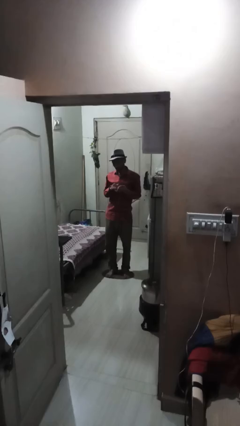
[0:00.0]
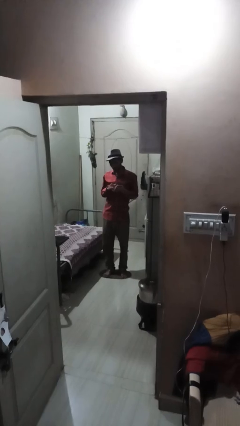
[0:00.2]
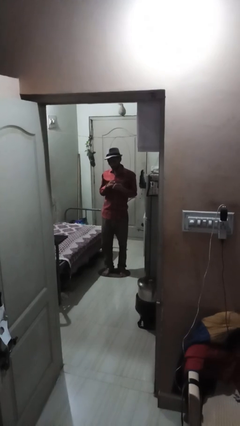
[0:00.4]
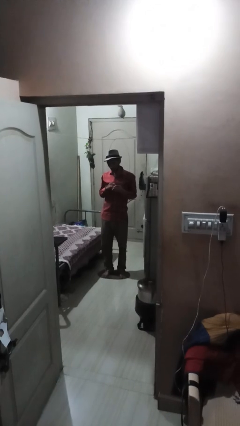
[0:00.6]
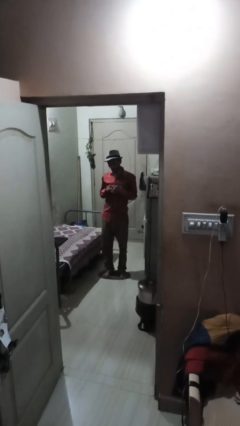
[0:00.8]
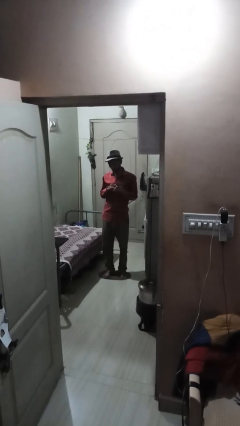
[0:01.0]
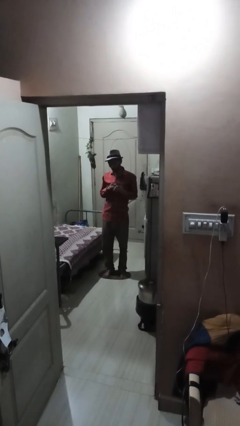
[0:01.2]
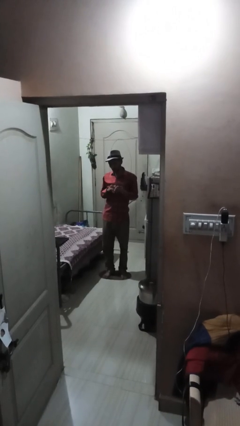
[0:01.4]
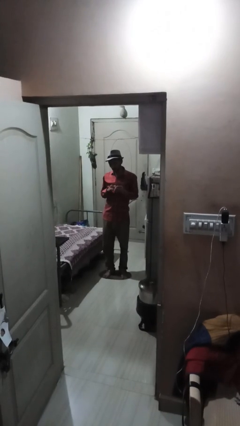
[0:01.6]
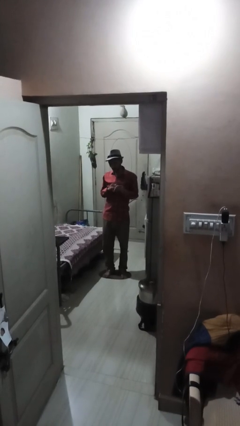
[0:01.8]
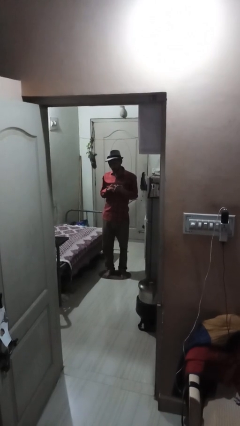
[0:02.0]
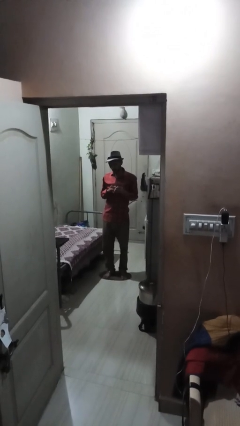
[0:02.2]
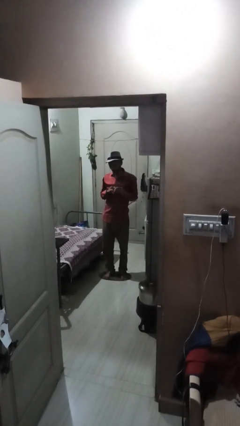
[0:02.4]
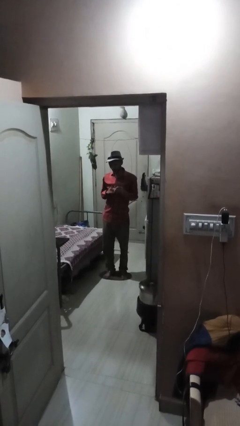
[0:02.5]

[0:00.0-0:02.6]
person files fingernails

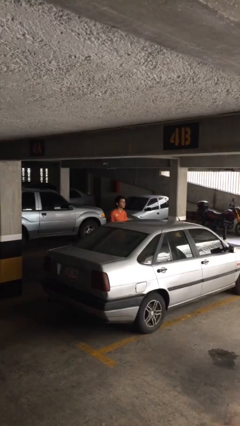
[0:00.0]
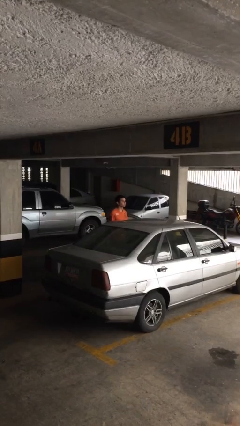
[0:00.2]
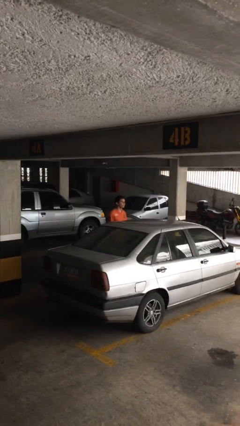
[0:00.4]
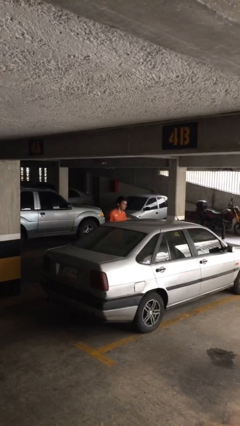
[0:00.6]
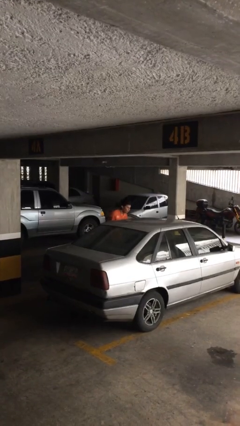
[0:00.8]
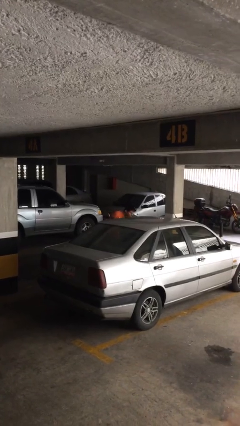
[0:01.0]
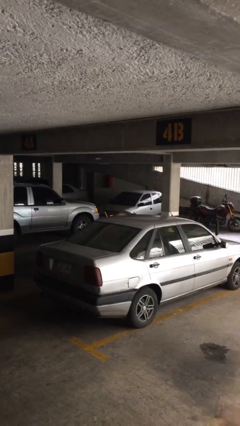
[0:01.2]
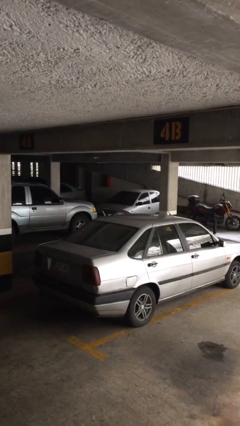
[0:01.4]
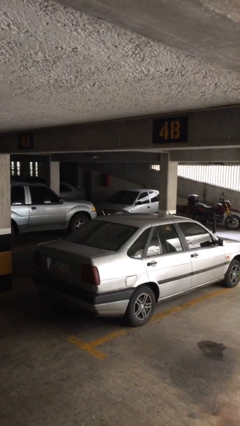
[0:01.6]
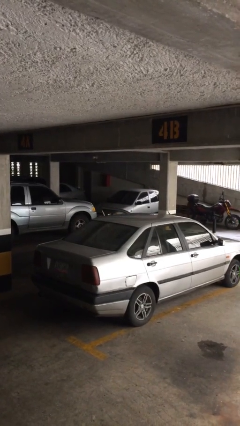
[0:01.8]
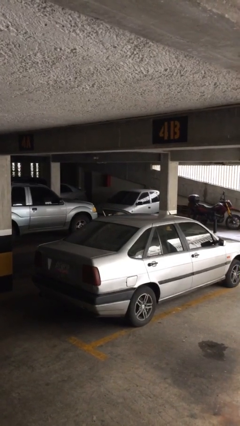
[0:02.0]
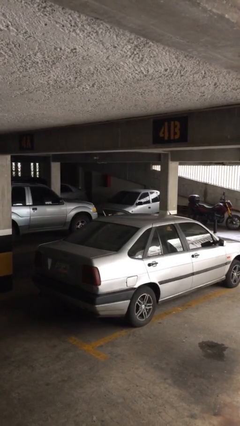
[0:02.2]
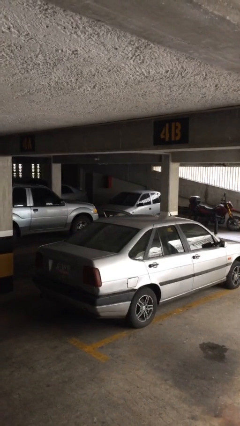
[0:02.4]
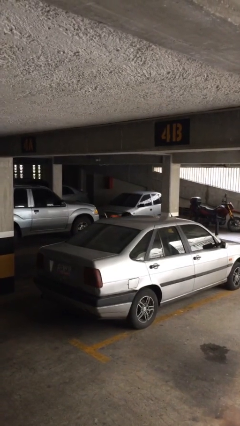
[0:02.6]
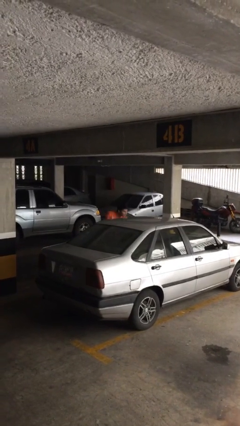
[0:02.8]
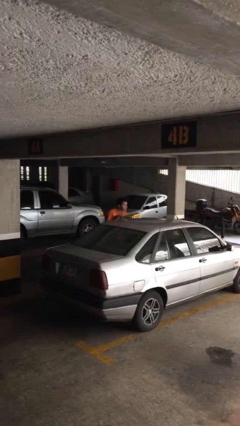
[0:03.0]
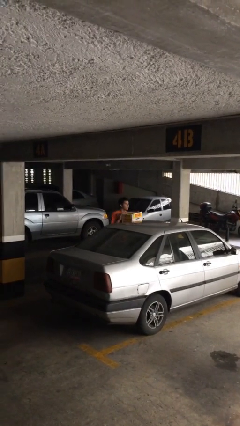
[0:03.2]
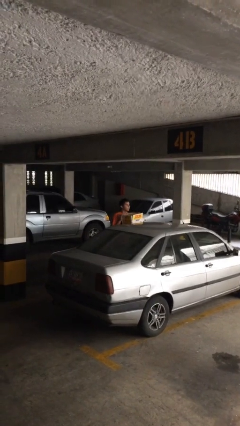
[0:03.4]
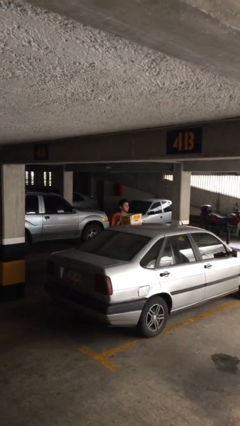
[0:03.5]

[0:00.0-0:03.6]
person unloads car

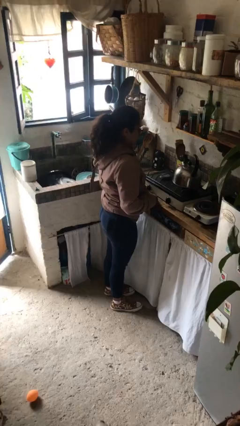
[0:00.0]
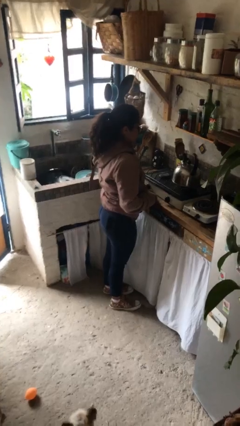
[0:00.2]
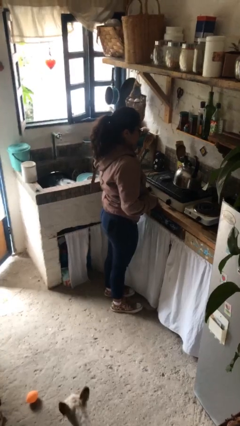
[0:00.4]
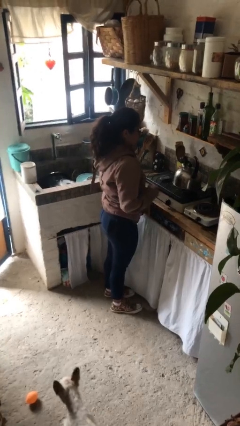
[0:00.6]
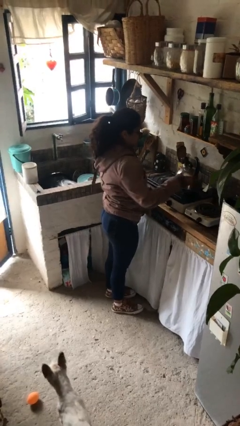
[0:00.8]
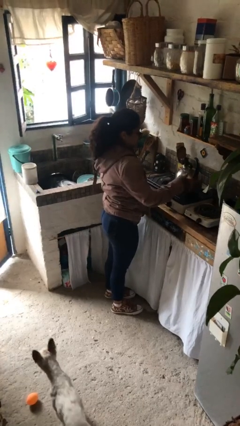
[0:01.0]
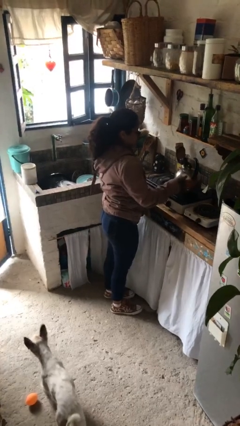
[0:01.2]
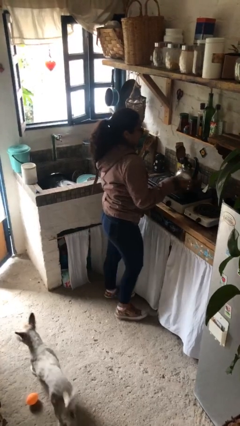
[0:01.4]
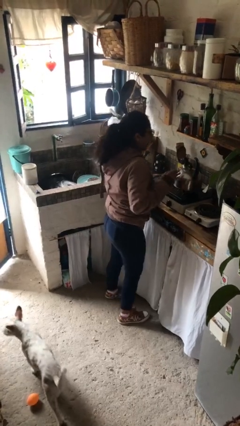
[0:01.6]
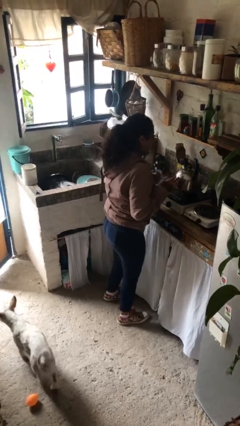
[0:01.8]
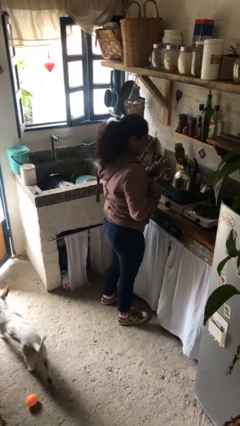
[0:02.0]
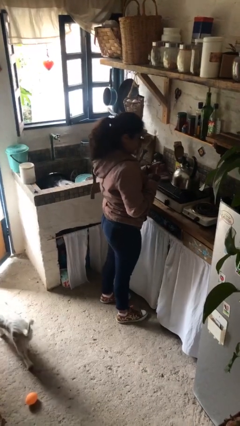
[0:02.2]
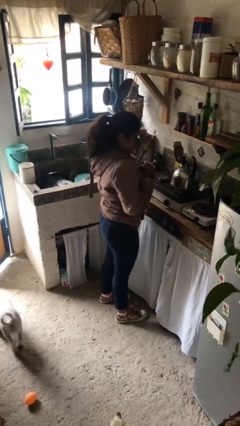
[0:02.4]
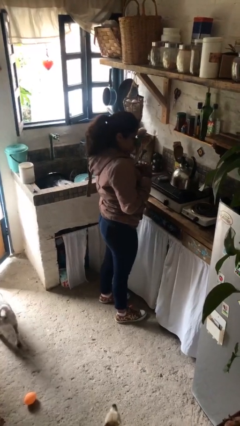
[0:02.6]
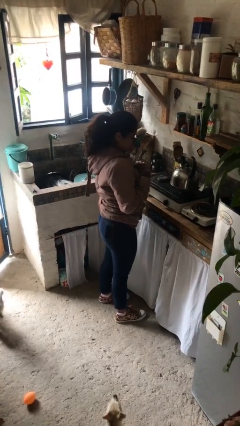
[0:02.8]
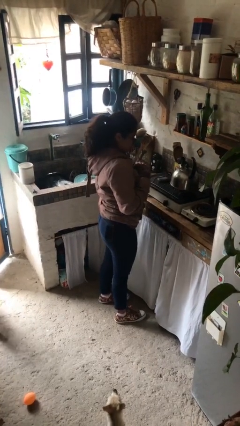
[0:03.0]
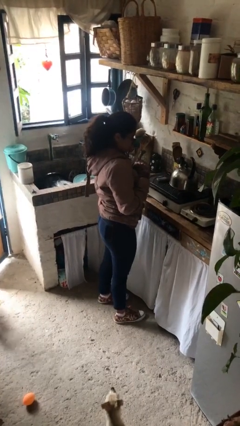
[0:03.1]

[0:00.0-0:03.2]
person burns hand

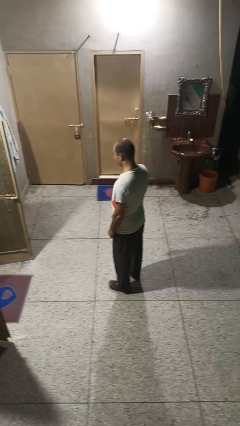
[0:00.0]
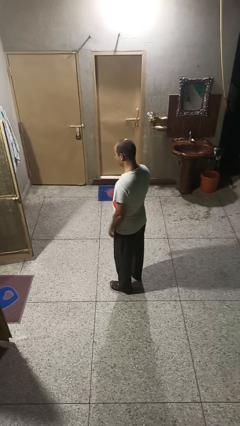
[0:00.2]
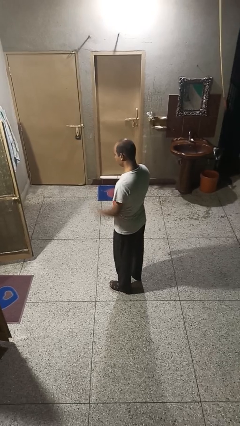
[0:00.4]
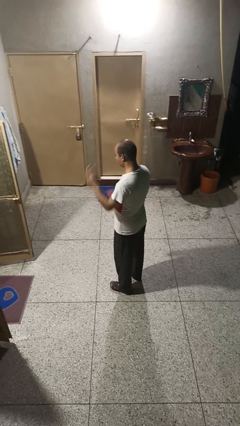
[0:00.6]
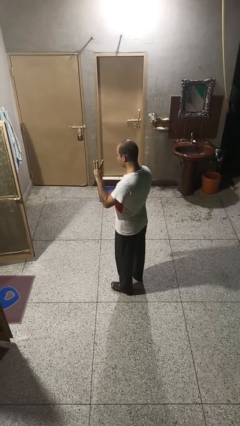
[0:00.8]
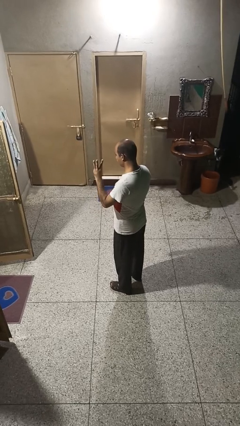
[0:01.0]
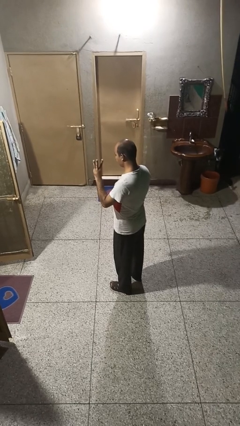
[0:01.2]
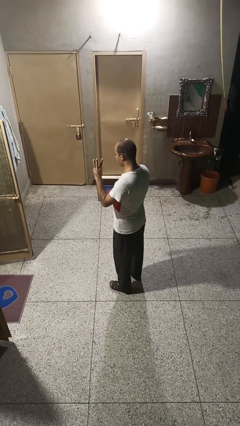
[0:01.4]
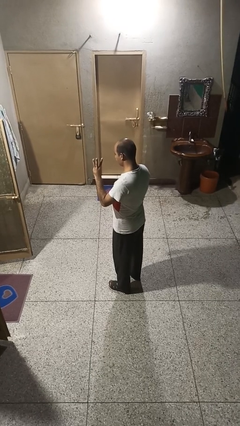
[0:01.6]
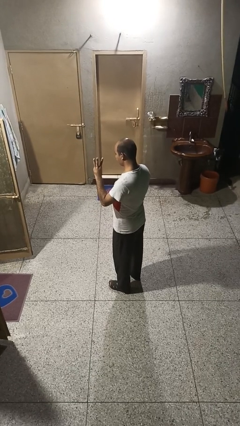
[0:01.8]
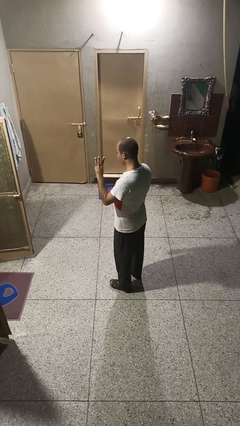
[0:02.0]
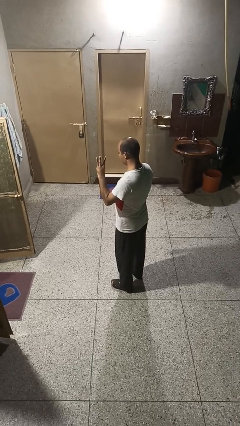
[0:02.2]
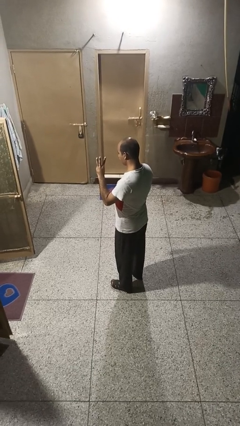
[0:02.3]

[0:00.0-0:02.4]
person gestures number three

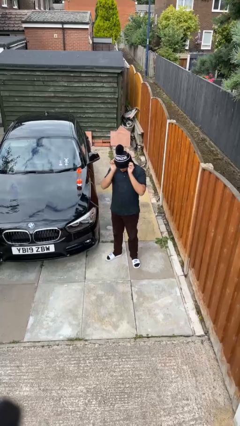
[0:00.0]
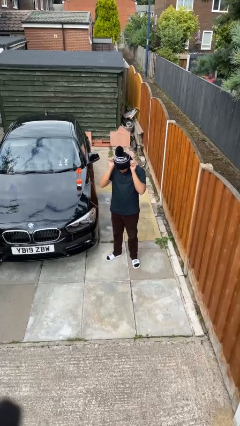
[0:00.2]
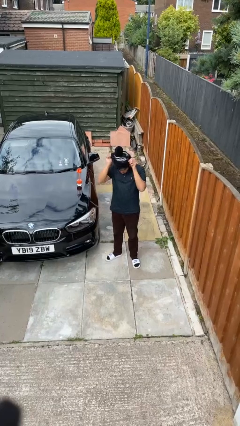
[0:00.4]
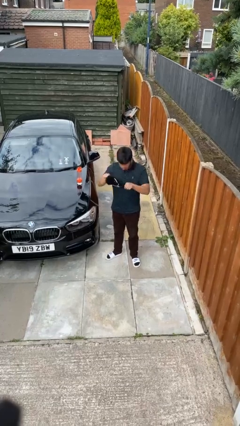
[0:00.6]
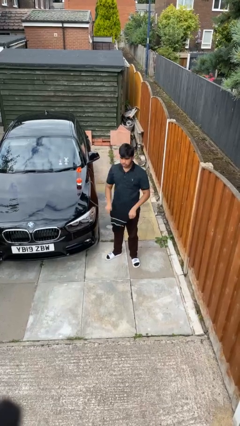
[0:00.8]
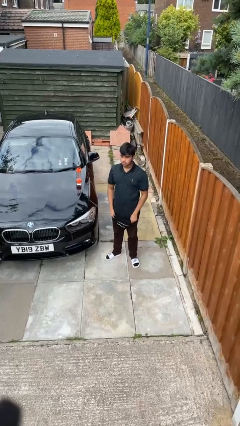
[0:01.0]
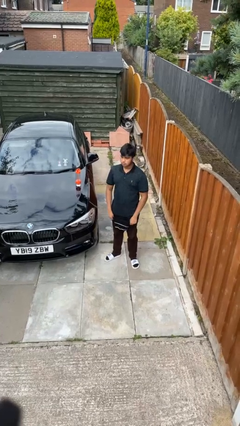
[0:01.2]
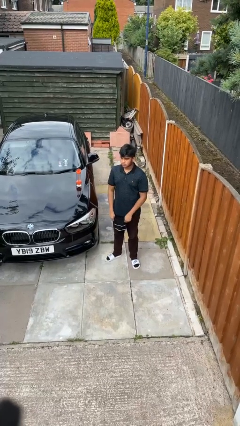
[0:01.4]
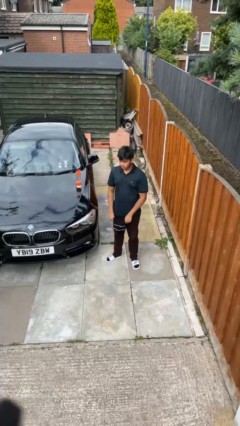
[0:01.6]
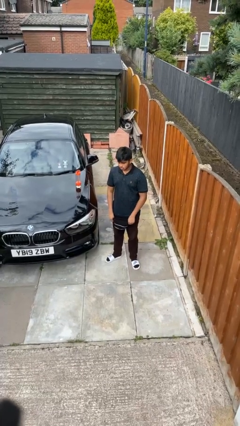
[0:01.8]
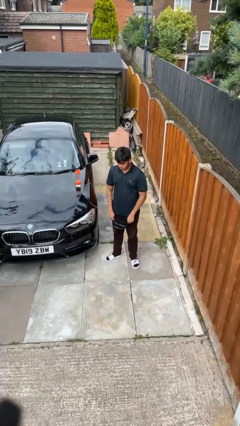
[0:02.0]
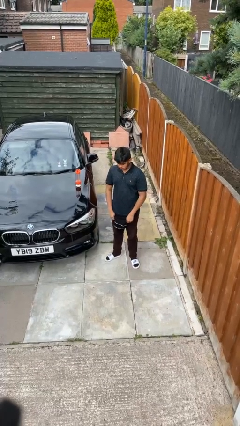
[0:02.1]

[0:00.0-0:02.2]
person takes off hat

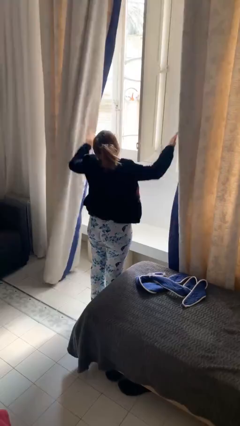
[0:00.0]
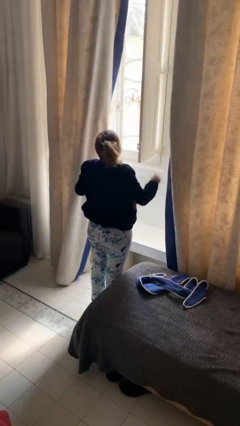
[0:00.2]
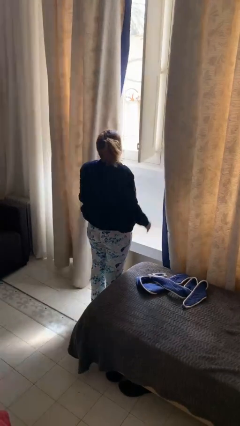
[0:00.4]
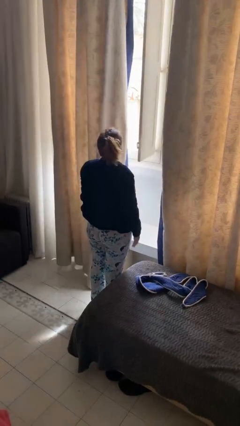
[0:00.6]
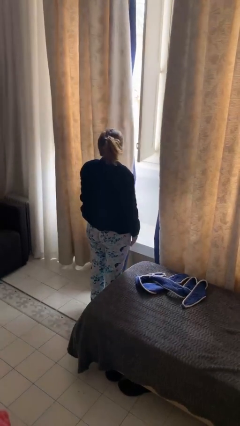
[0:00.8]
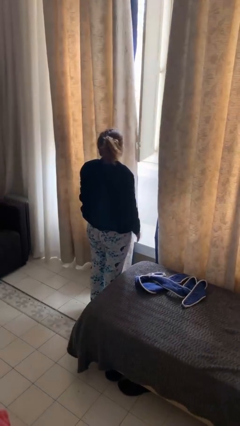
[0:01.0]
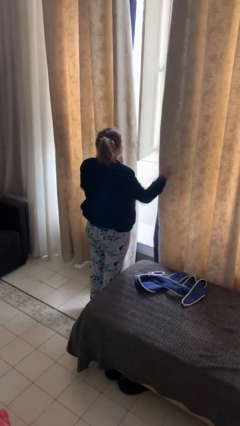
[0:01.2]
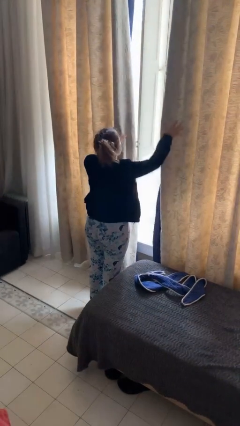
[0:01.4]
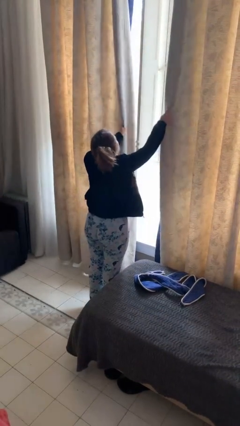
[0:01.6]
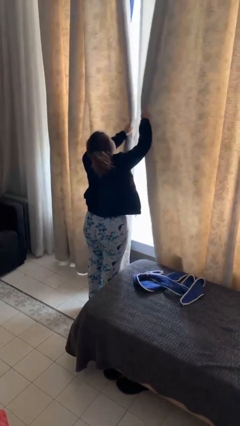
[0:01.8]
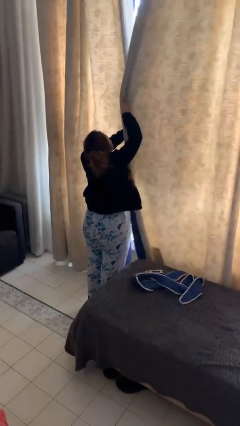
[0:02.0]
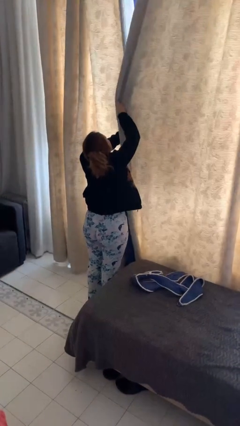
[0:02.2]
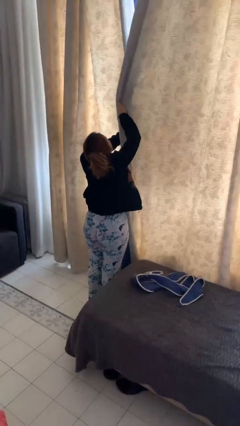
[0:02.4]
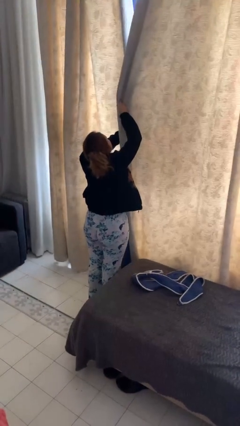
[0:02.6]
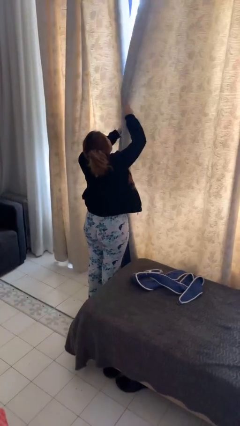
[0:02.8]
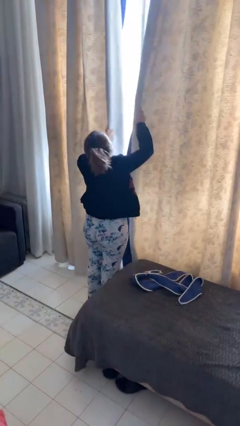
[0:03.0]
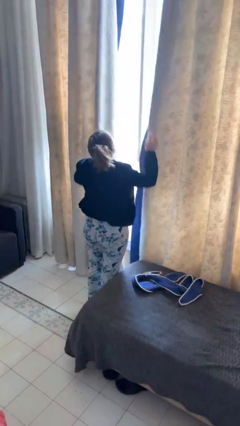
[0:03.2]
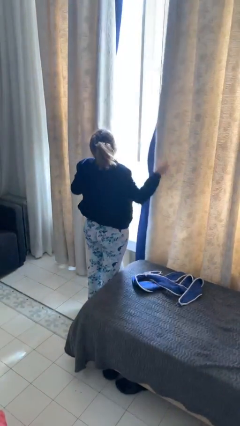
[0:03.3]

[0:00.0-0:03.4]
person closes curtains
